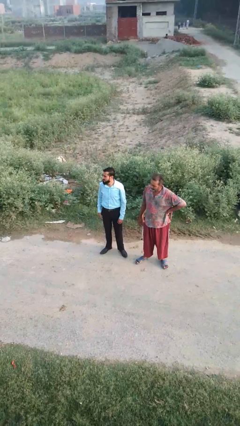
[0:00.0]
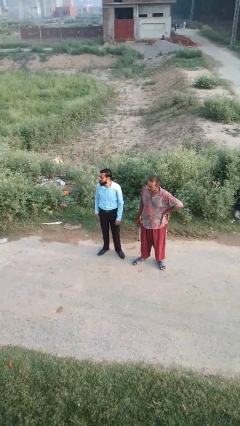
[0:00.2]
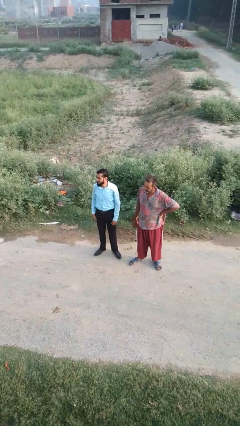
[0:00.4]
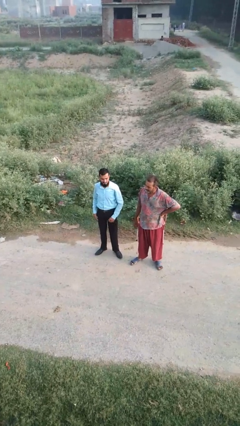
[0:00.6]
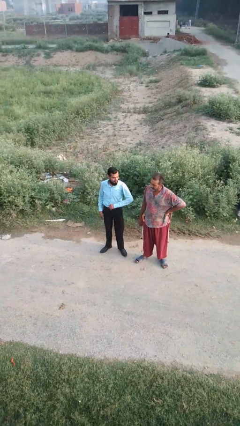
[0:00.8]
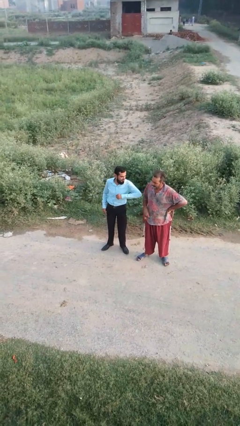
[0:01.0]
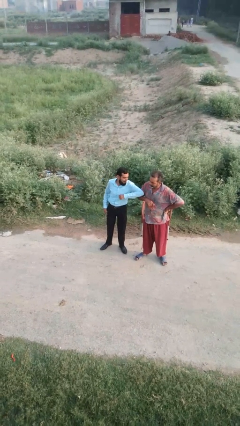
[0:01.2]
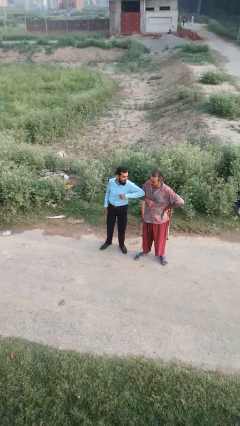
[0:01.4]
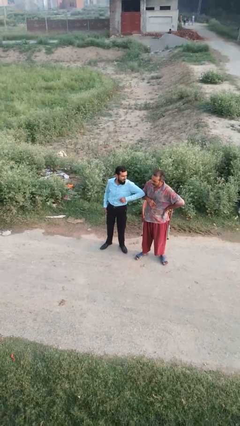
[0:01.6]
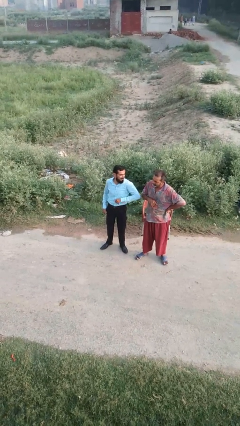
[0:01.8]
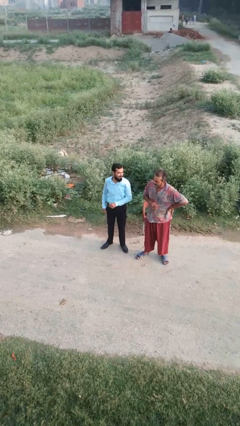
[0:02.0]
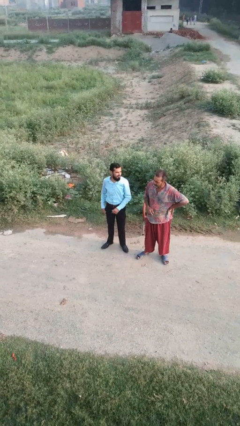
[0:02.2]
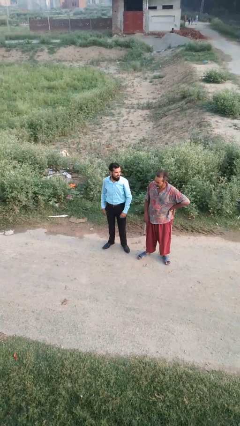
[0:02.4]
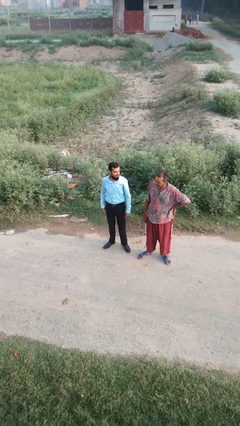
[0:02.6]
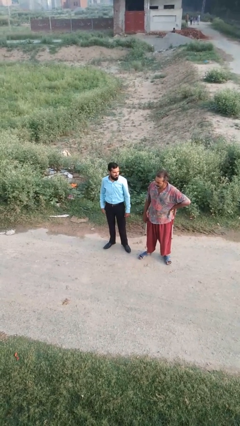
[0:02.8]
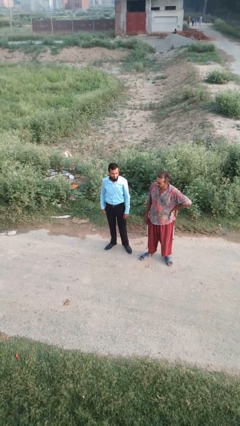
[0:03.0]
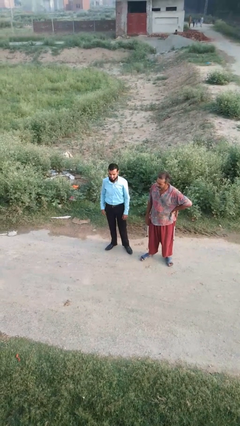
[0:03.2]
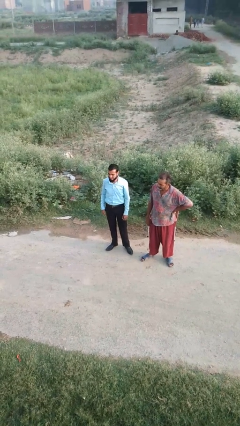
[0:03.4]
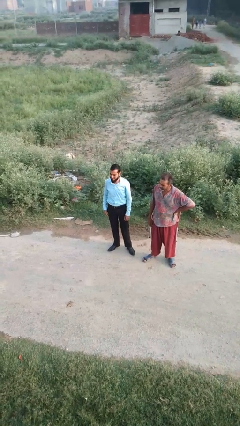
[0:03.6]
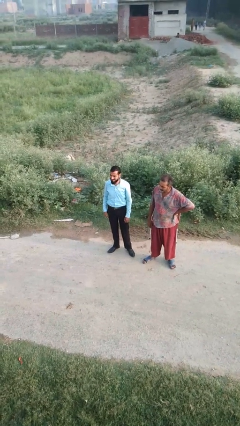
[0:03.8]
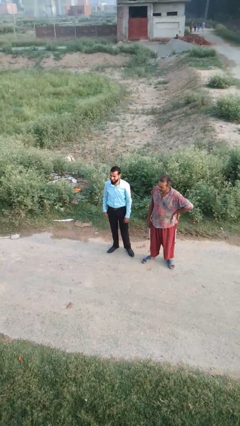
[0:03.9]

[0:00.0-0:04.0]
person nudges person with elbow

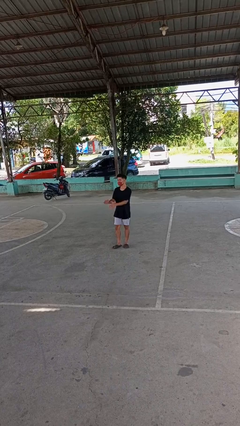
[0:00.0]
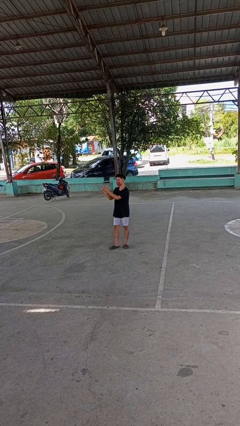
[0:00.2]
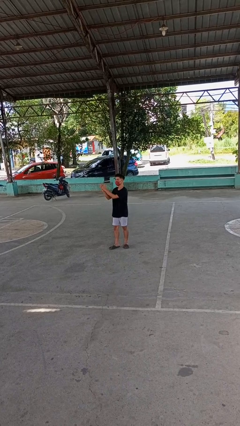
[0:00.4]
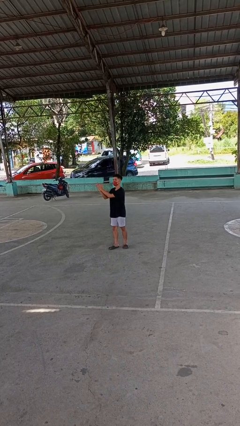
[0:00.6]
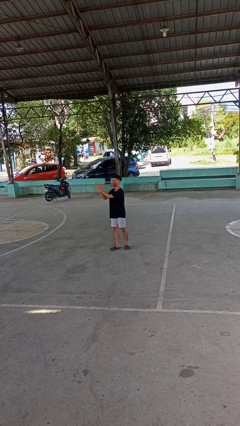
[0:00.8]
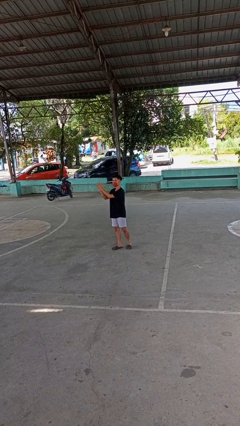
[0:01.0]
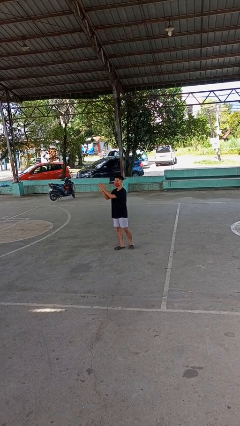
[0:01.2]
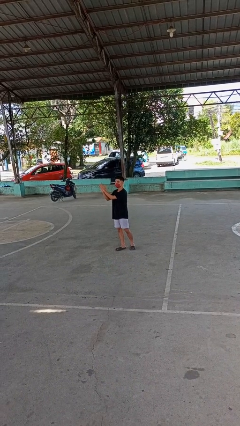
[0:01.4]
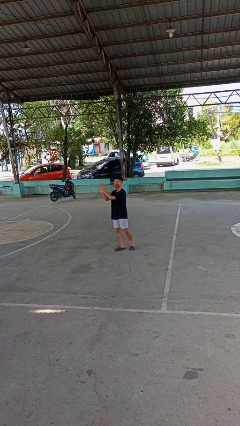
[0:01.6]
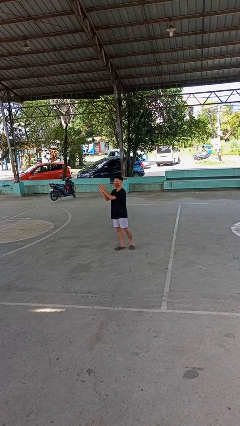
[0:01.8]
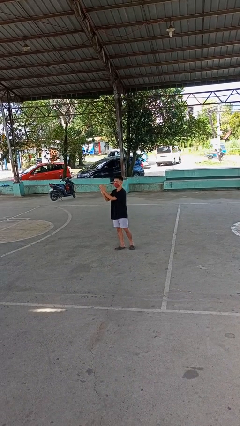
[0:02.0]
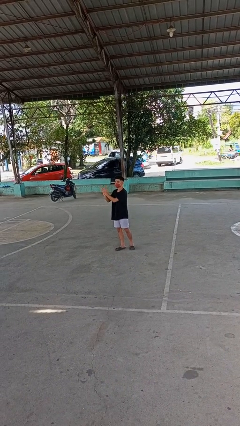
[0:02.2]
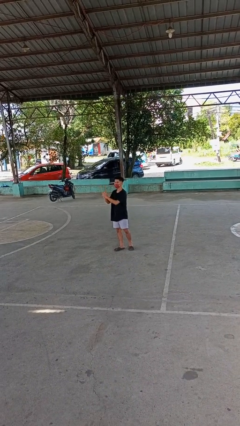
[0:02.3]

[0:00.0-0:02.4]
person claps hands

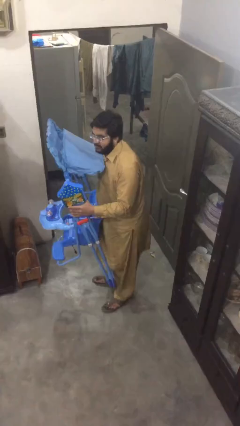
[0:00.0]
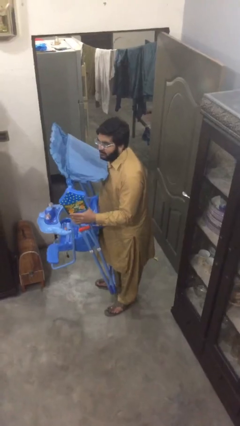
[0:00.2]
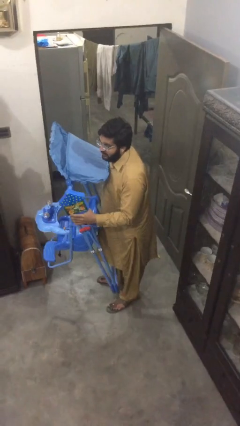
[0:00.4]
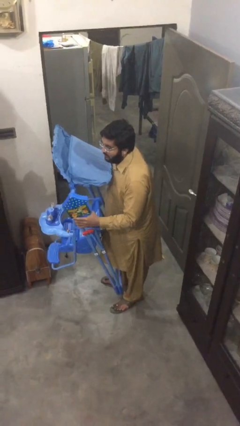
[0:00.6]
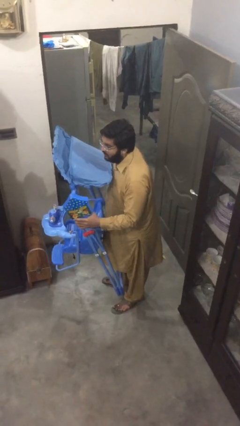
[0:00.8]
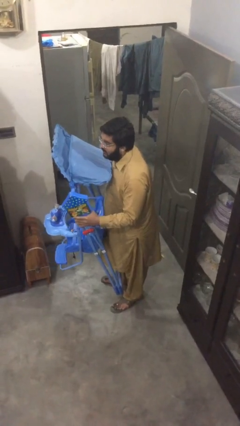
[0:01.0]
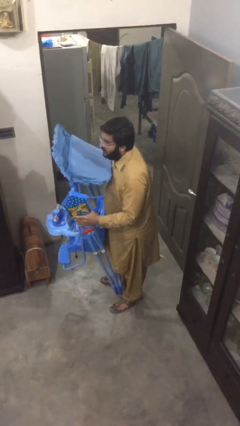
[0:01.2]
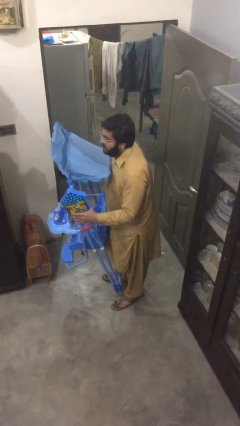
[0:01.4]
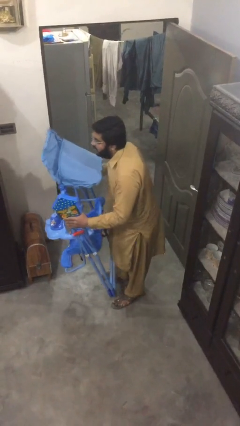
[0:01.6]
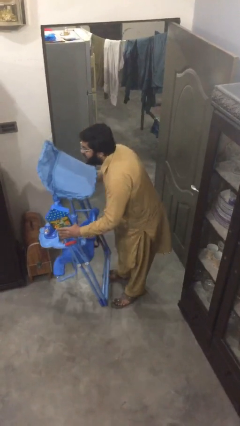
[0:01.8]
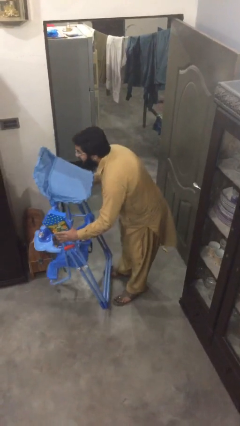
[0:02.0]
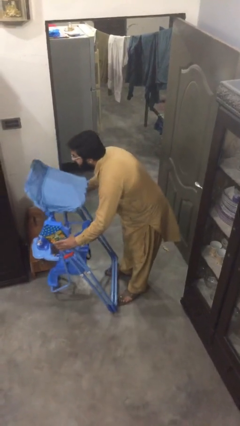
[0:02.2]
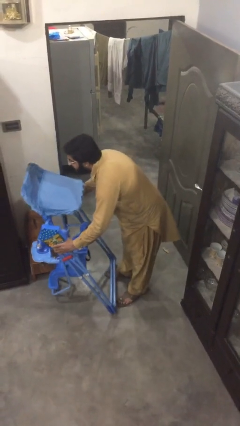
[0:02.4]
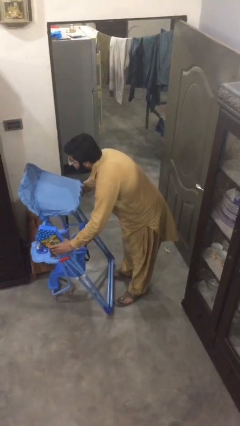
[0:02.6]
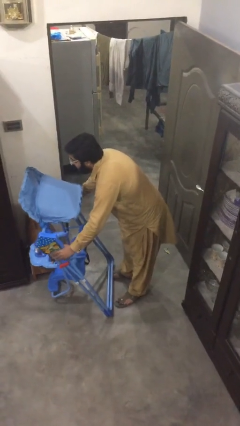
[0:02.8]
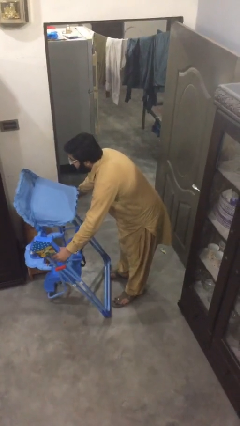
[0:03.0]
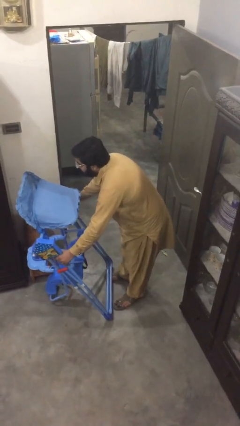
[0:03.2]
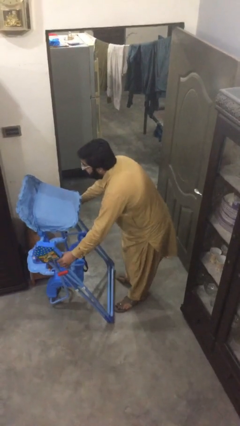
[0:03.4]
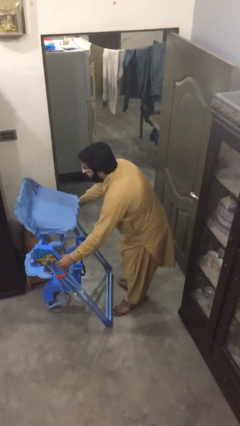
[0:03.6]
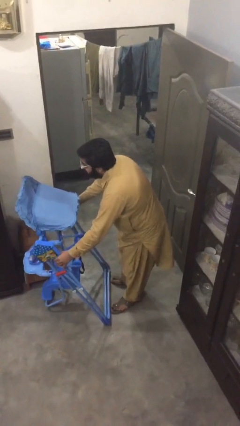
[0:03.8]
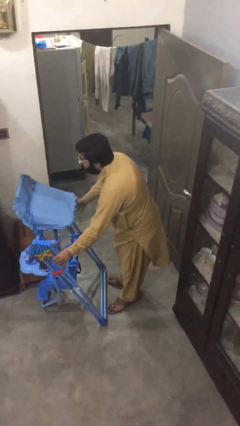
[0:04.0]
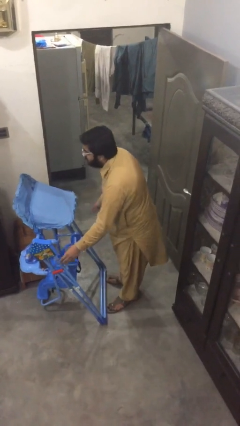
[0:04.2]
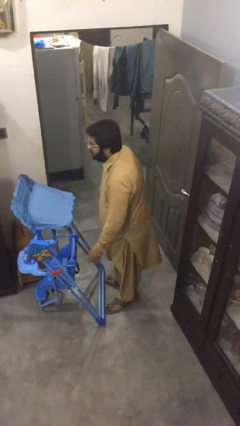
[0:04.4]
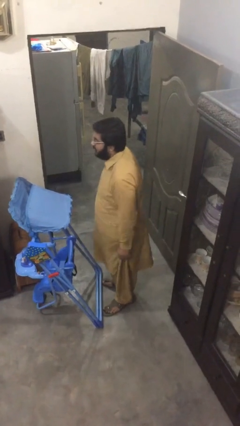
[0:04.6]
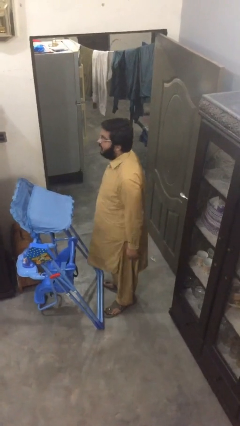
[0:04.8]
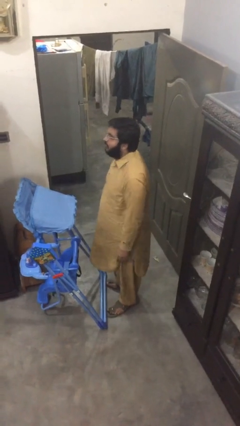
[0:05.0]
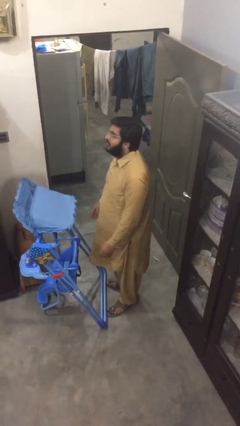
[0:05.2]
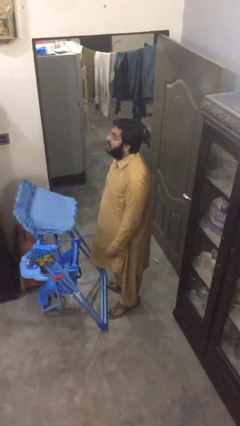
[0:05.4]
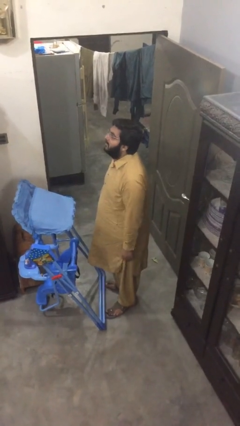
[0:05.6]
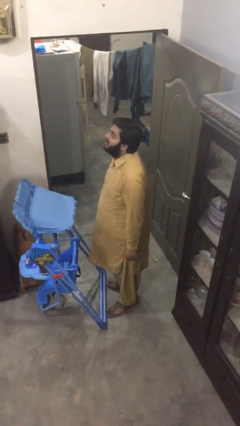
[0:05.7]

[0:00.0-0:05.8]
person puts down object on floor

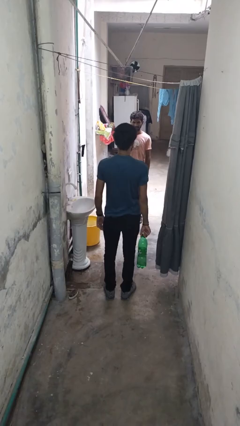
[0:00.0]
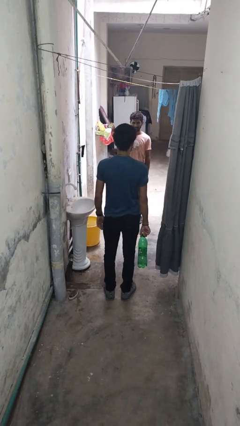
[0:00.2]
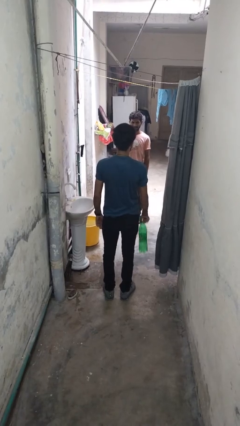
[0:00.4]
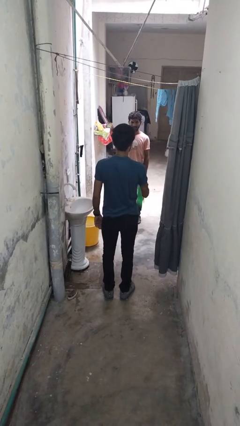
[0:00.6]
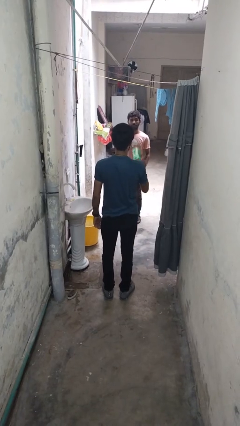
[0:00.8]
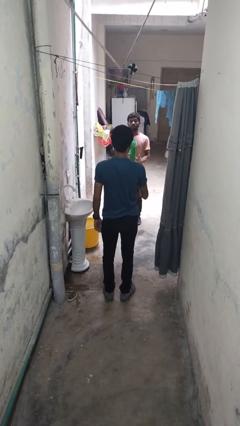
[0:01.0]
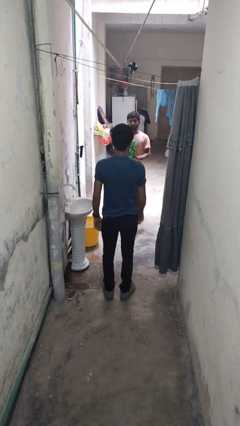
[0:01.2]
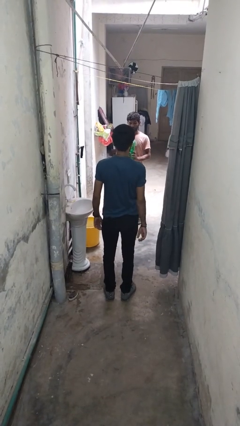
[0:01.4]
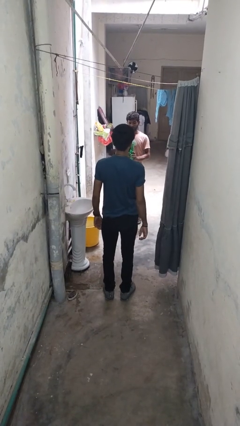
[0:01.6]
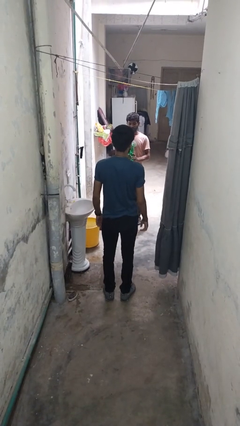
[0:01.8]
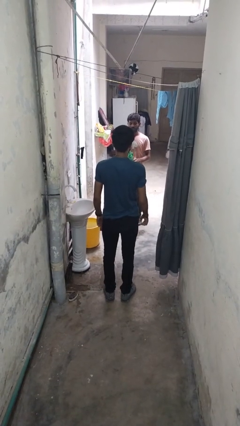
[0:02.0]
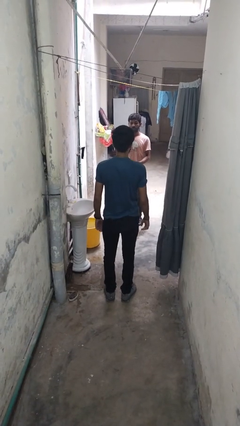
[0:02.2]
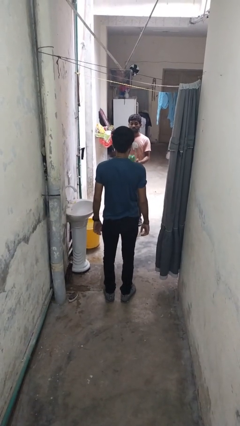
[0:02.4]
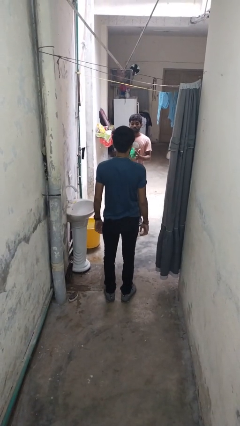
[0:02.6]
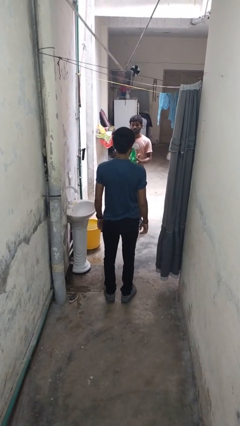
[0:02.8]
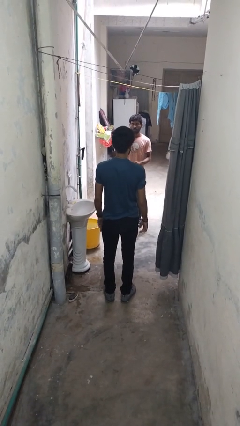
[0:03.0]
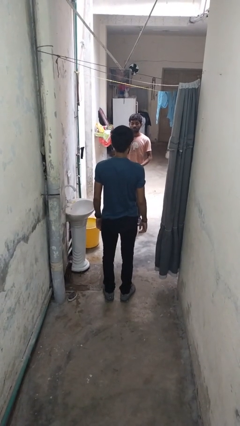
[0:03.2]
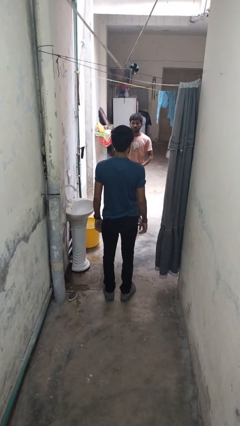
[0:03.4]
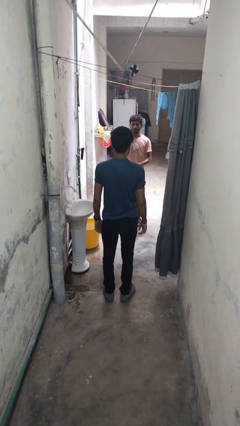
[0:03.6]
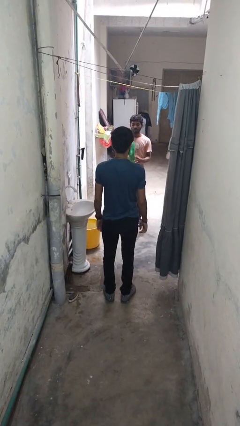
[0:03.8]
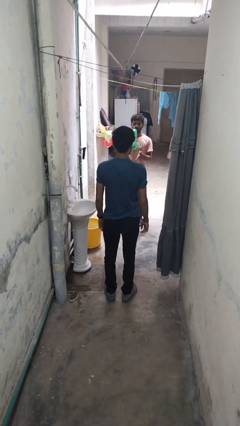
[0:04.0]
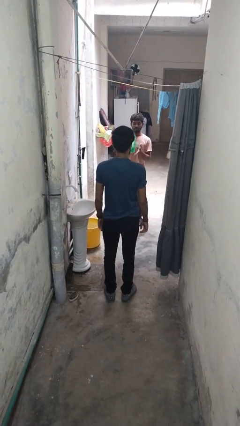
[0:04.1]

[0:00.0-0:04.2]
person throws object to person

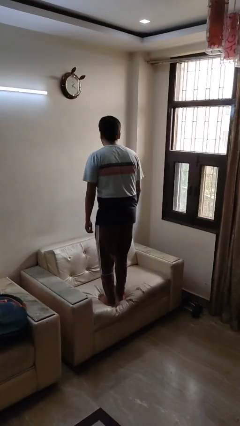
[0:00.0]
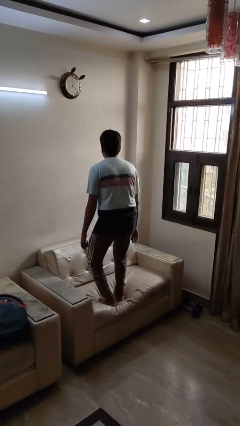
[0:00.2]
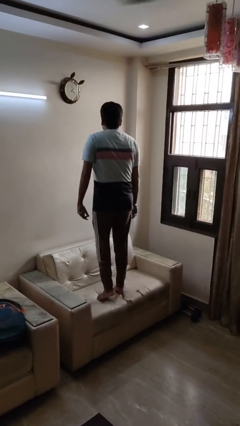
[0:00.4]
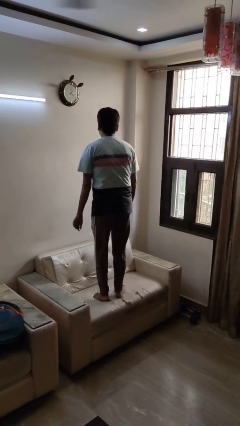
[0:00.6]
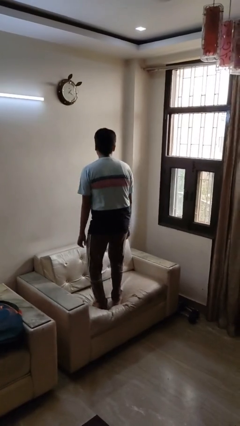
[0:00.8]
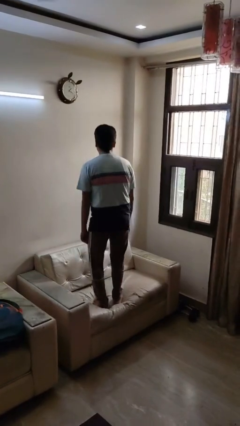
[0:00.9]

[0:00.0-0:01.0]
person jumps on couch

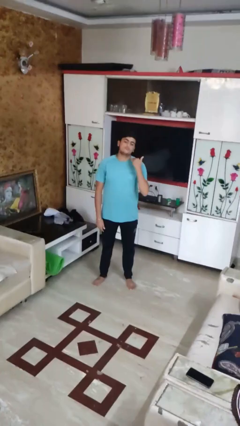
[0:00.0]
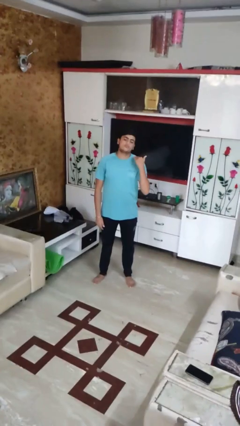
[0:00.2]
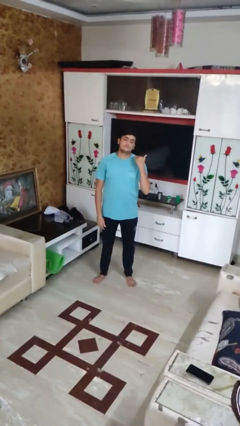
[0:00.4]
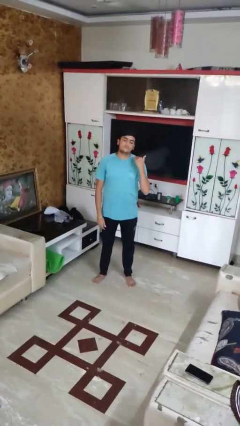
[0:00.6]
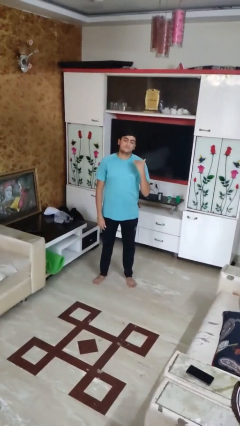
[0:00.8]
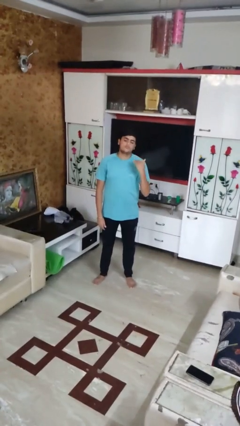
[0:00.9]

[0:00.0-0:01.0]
person gestures cut
